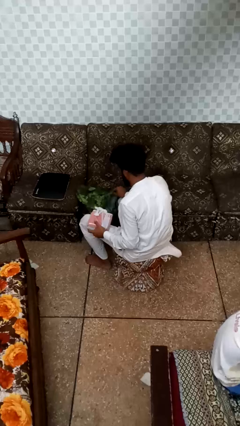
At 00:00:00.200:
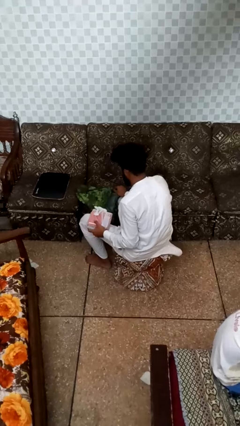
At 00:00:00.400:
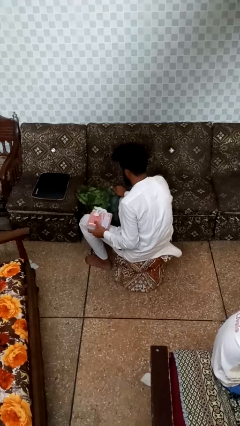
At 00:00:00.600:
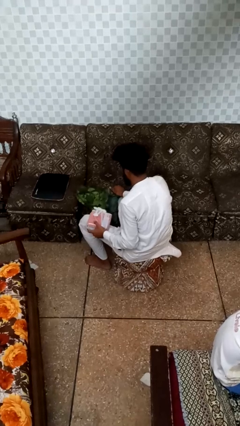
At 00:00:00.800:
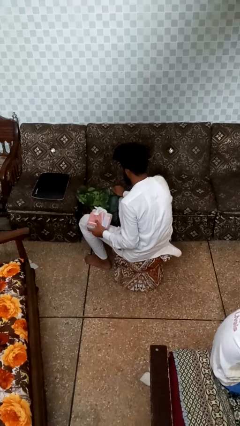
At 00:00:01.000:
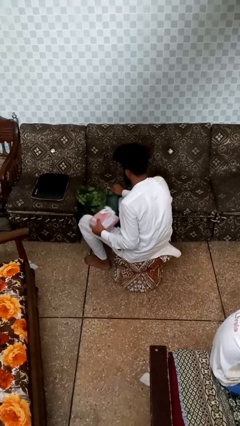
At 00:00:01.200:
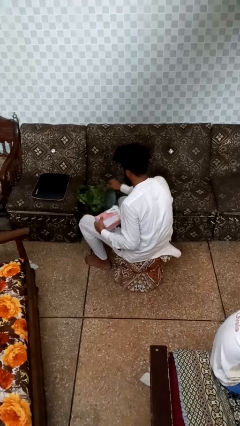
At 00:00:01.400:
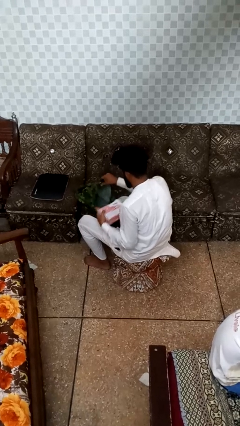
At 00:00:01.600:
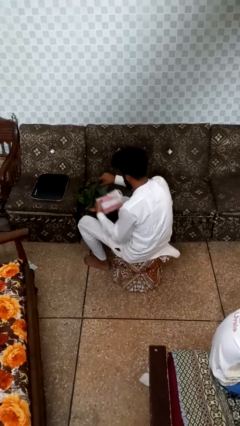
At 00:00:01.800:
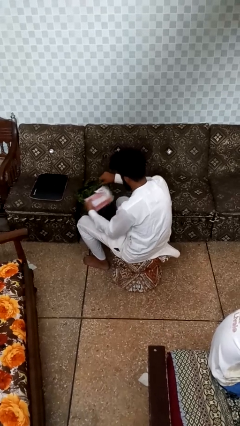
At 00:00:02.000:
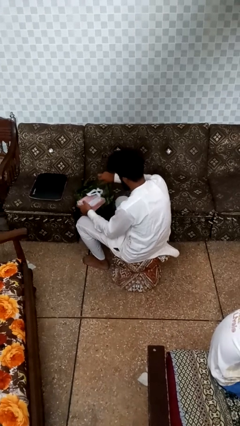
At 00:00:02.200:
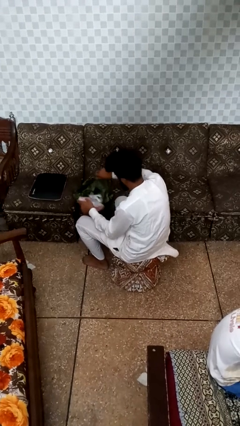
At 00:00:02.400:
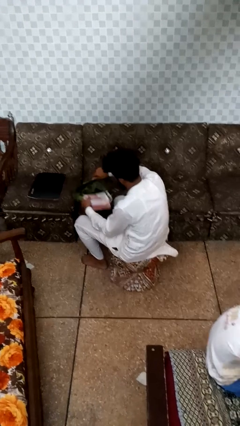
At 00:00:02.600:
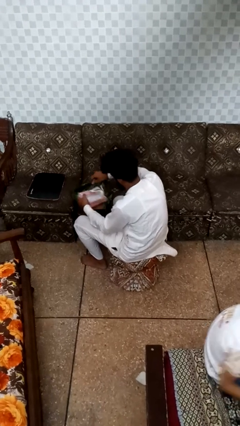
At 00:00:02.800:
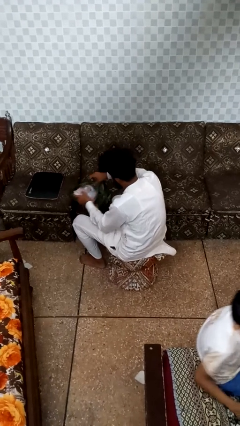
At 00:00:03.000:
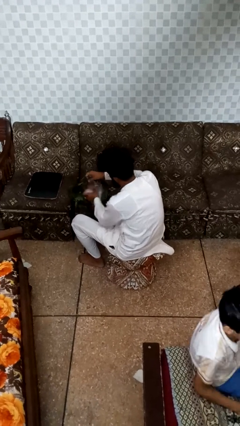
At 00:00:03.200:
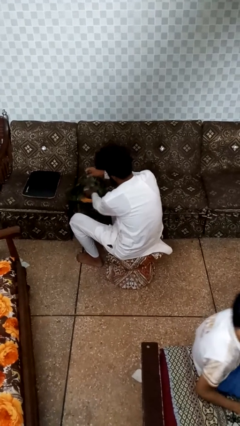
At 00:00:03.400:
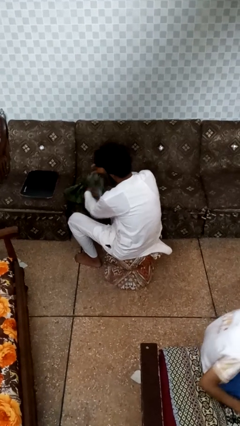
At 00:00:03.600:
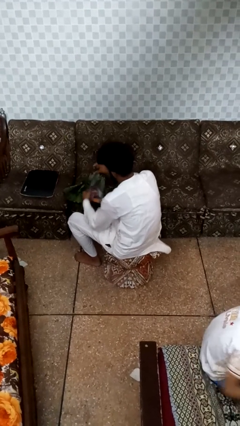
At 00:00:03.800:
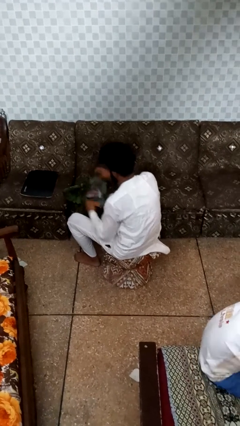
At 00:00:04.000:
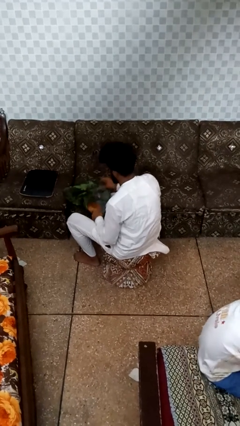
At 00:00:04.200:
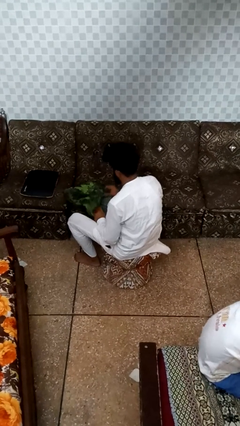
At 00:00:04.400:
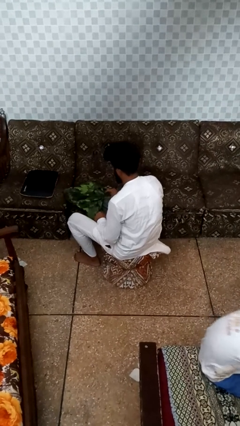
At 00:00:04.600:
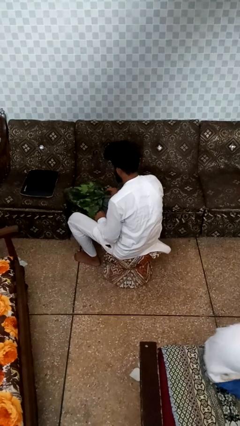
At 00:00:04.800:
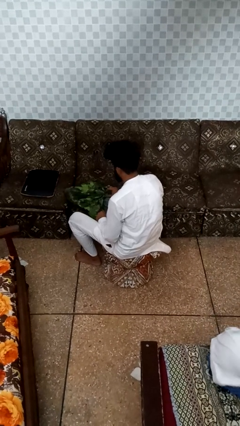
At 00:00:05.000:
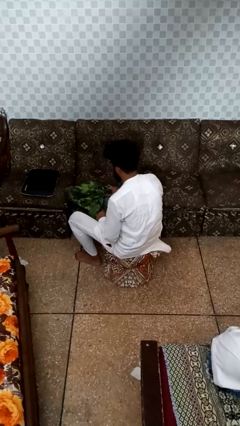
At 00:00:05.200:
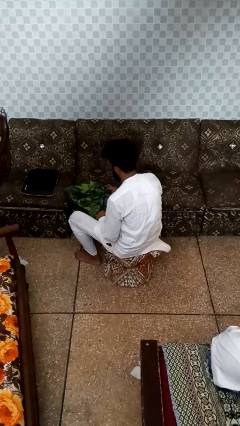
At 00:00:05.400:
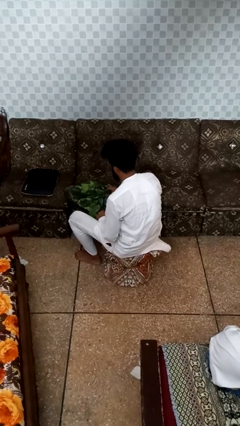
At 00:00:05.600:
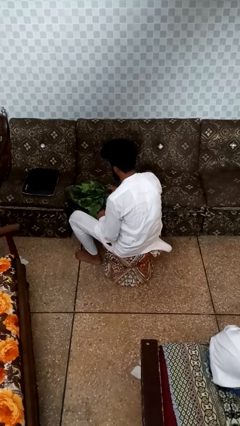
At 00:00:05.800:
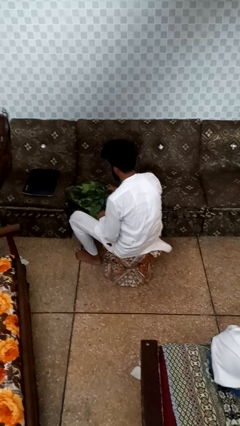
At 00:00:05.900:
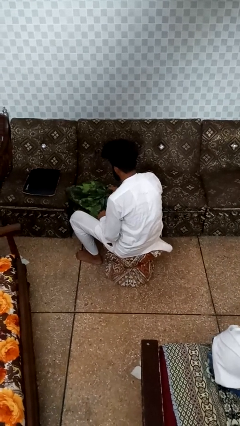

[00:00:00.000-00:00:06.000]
person puts object into bag

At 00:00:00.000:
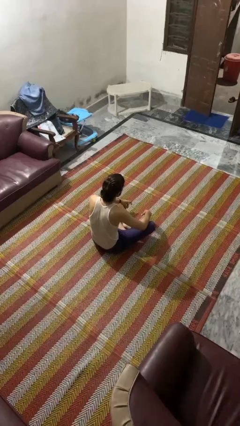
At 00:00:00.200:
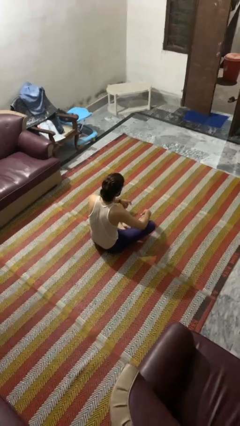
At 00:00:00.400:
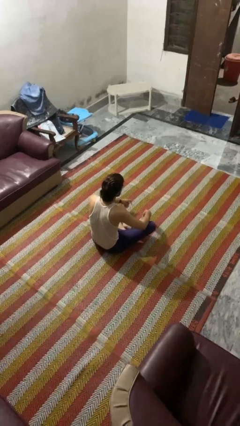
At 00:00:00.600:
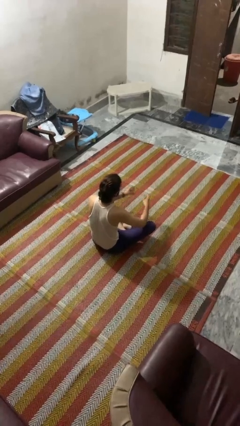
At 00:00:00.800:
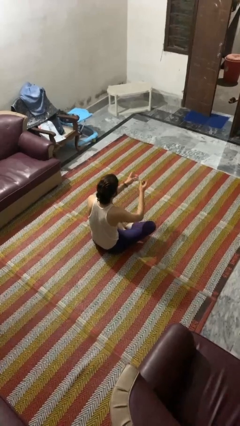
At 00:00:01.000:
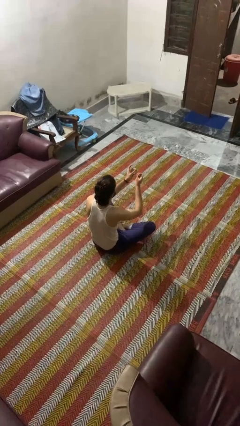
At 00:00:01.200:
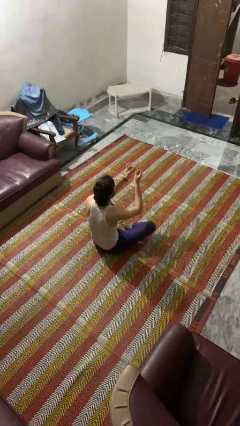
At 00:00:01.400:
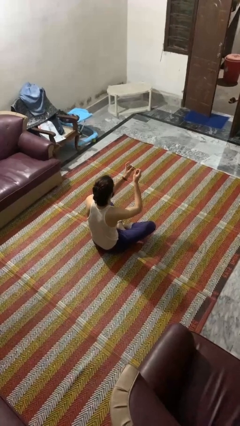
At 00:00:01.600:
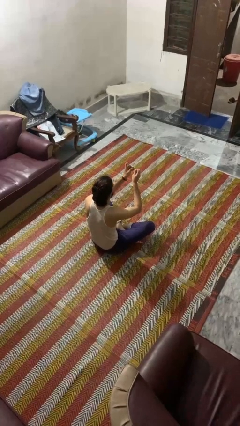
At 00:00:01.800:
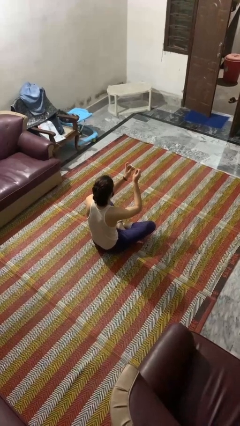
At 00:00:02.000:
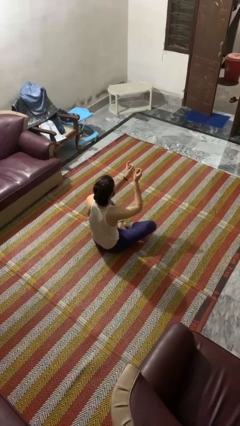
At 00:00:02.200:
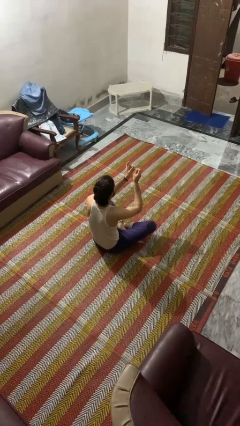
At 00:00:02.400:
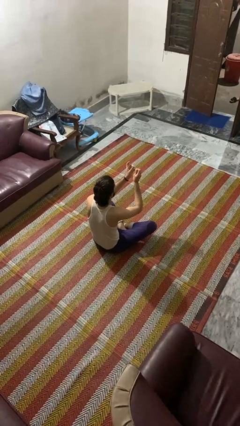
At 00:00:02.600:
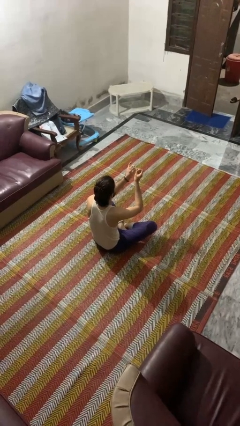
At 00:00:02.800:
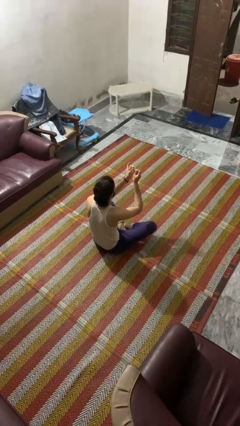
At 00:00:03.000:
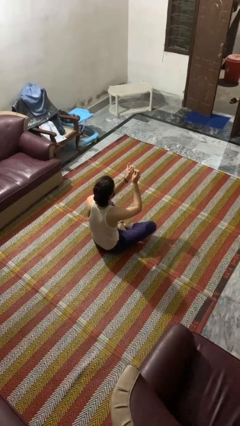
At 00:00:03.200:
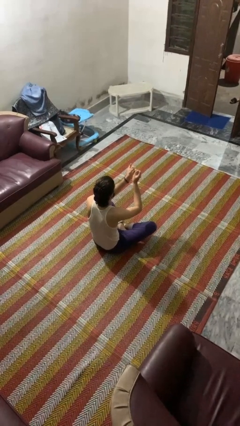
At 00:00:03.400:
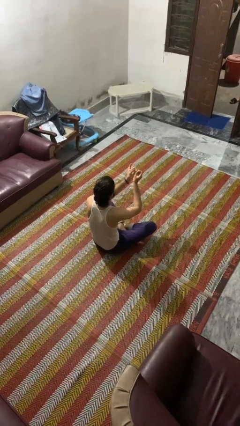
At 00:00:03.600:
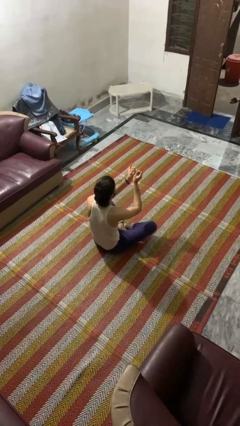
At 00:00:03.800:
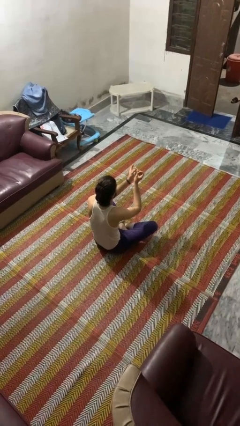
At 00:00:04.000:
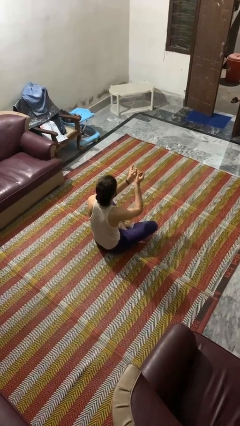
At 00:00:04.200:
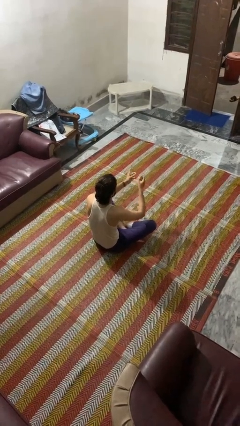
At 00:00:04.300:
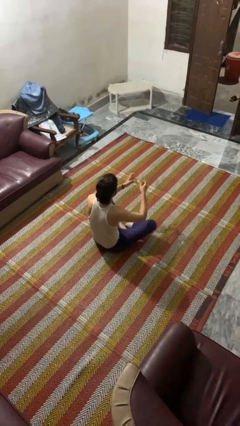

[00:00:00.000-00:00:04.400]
person clips fingernails

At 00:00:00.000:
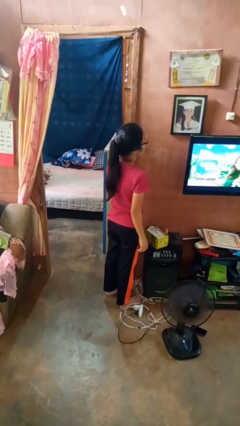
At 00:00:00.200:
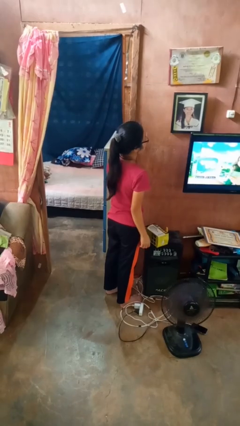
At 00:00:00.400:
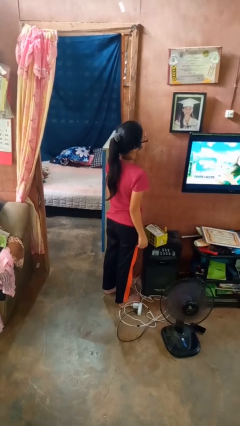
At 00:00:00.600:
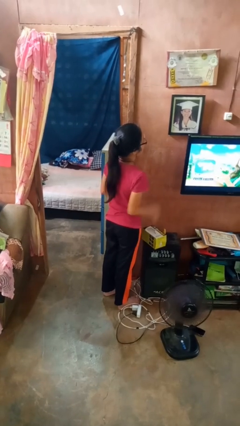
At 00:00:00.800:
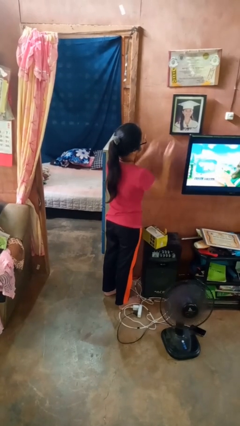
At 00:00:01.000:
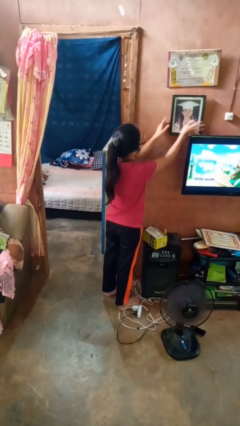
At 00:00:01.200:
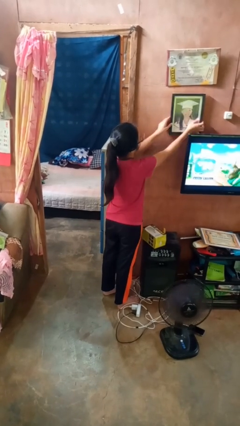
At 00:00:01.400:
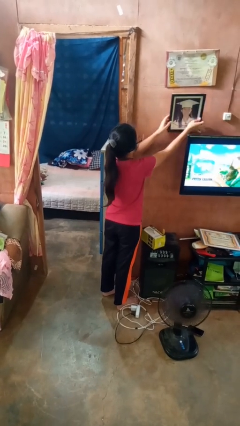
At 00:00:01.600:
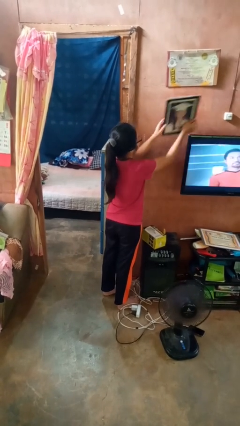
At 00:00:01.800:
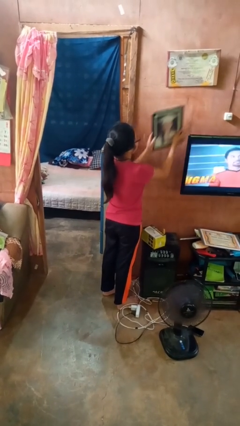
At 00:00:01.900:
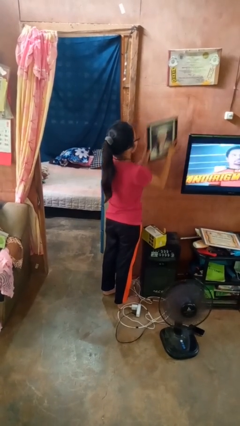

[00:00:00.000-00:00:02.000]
person takes down picture frame

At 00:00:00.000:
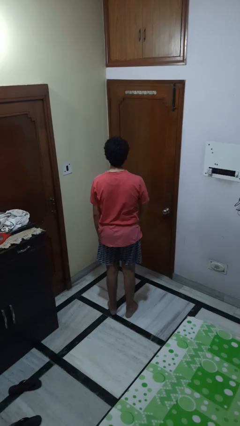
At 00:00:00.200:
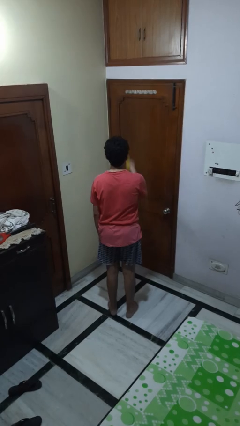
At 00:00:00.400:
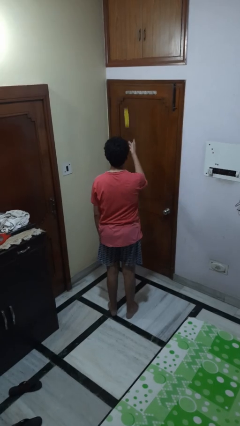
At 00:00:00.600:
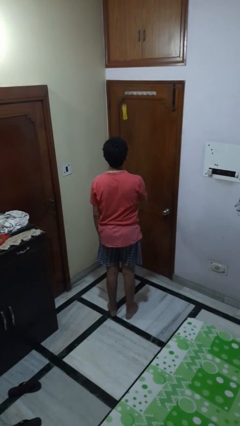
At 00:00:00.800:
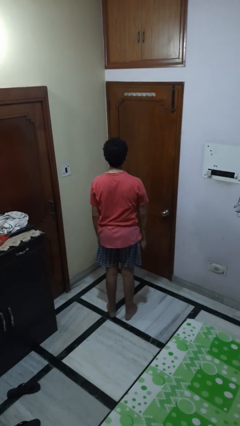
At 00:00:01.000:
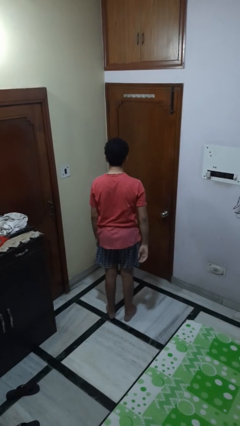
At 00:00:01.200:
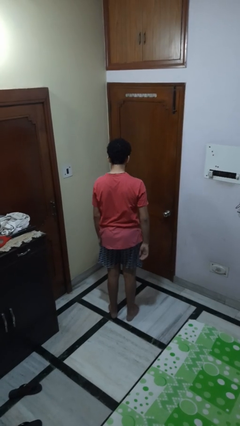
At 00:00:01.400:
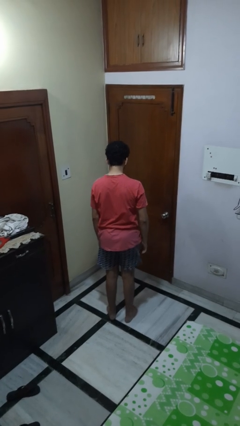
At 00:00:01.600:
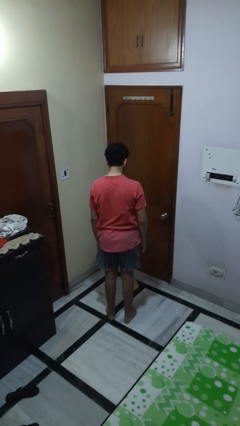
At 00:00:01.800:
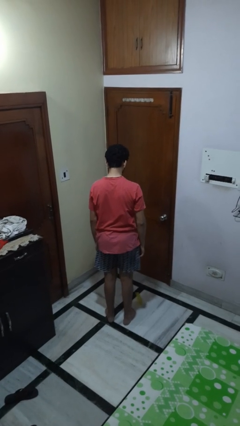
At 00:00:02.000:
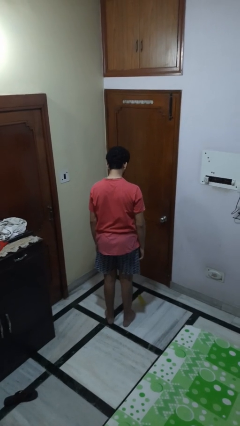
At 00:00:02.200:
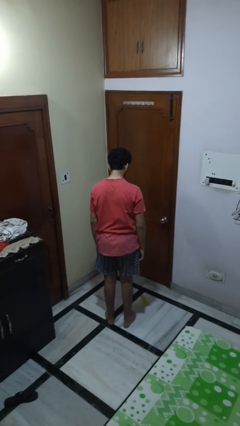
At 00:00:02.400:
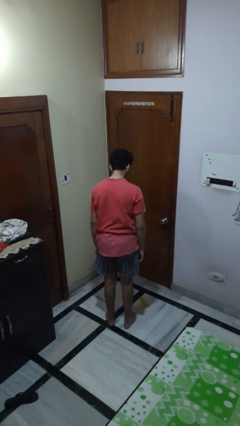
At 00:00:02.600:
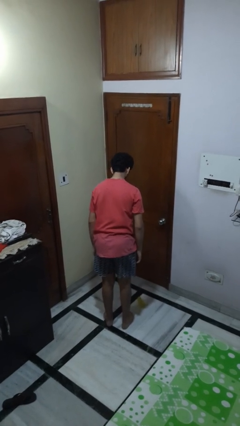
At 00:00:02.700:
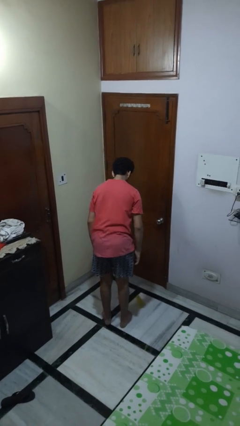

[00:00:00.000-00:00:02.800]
person throws object into air

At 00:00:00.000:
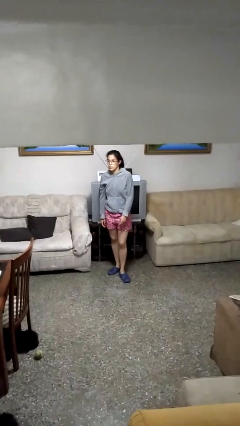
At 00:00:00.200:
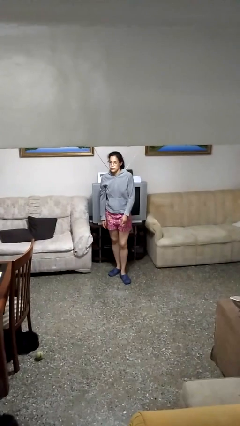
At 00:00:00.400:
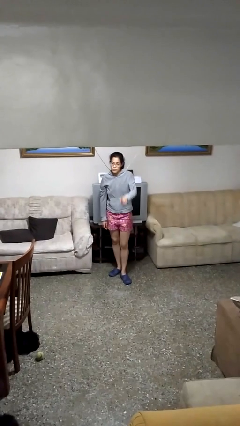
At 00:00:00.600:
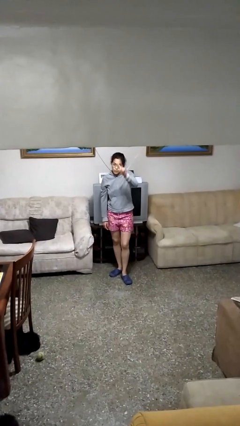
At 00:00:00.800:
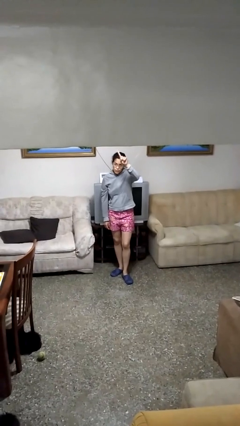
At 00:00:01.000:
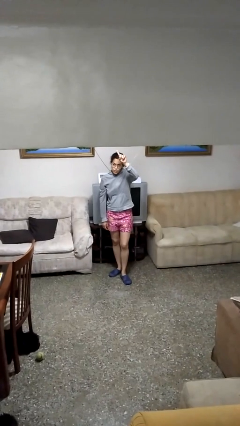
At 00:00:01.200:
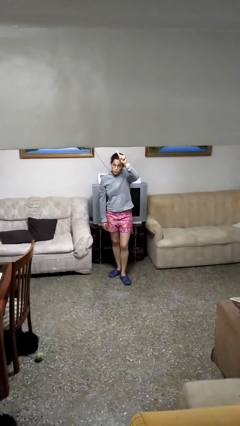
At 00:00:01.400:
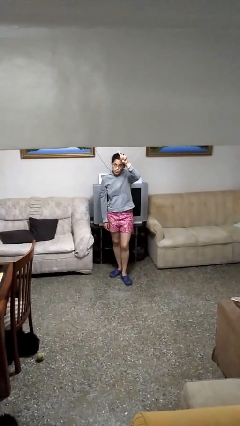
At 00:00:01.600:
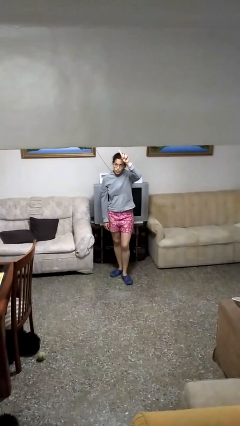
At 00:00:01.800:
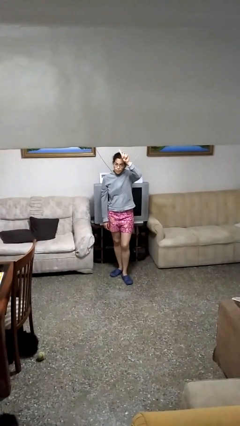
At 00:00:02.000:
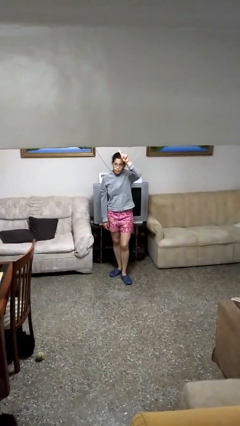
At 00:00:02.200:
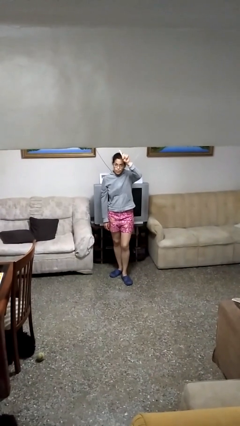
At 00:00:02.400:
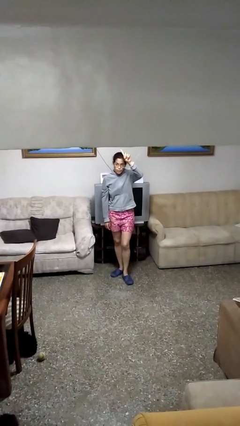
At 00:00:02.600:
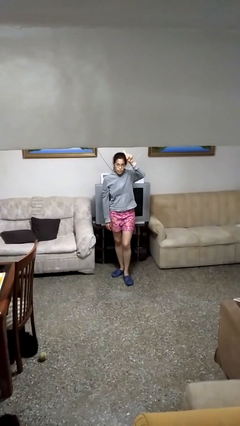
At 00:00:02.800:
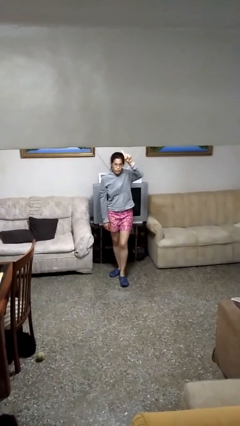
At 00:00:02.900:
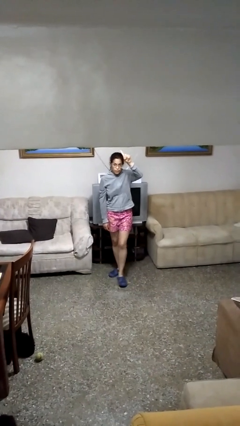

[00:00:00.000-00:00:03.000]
person gestures raise hand
